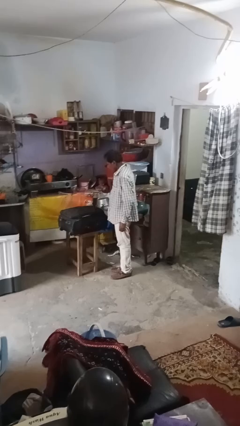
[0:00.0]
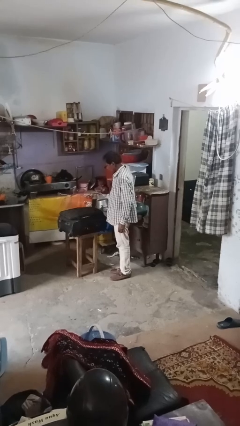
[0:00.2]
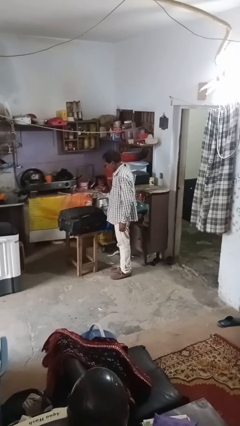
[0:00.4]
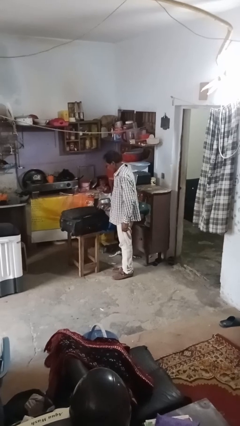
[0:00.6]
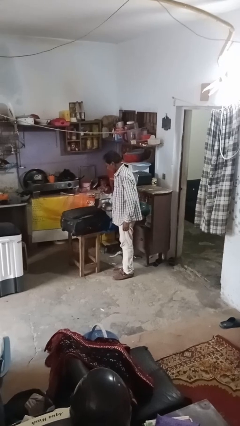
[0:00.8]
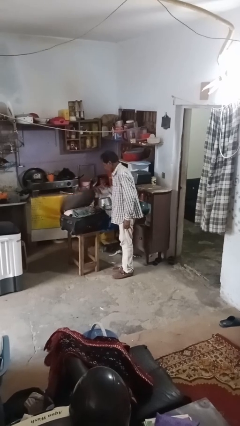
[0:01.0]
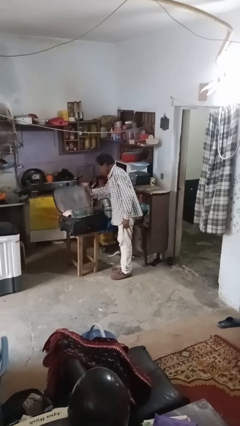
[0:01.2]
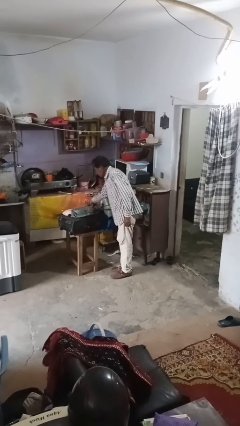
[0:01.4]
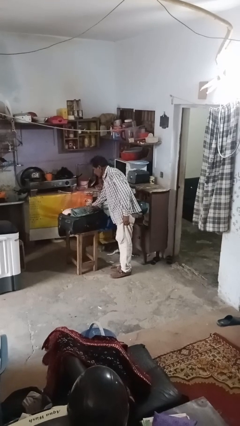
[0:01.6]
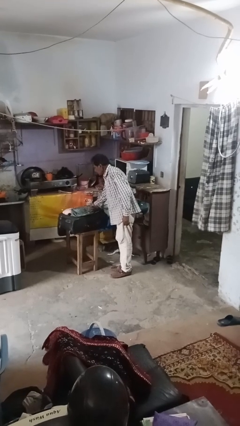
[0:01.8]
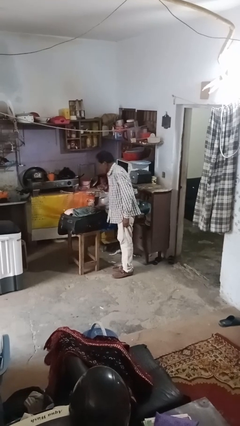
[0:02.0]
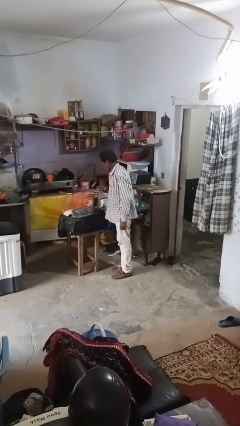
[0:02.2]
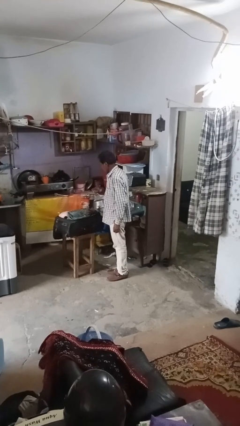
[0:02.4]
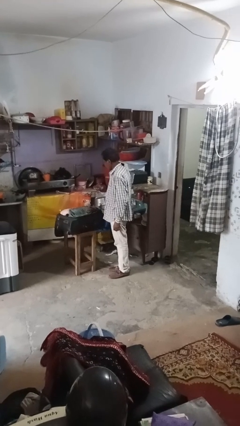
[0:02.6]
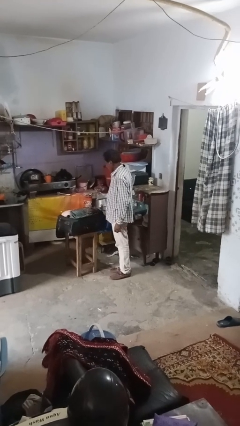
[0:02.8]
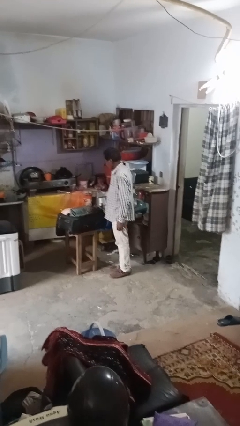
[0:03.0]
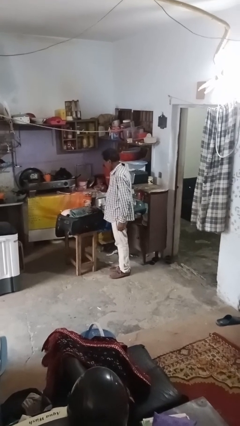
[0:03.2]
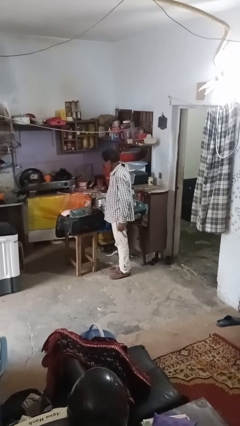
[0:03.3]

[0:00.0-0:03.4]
person opens suitcase

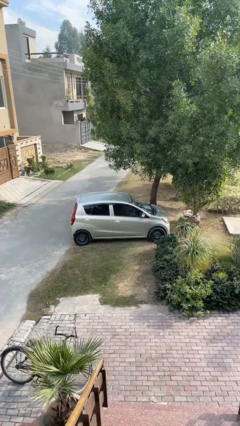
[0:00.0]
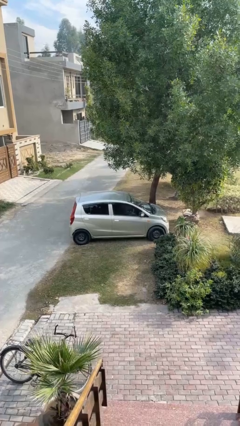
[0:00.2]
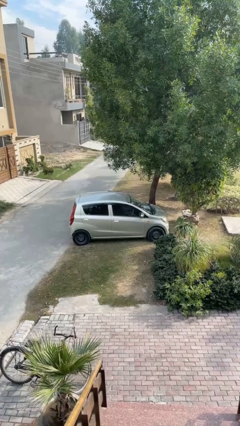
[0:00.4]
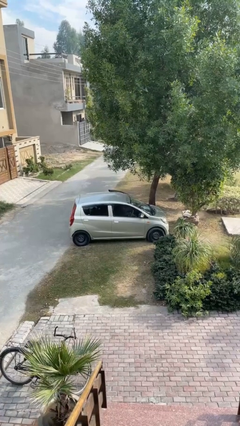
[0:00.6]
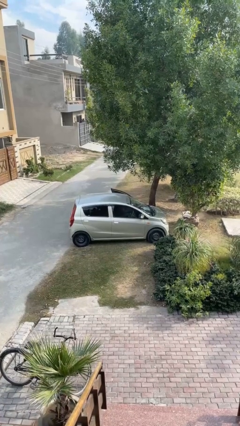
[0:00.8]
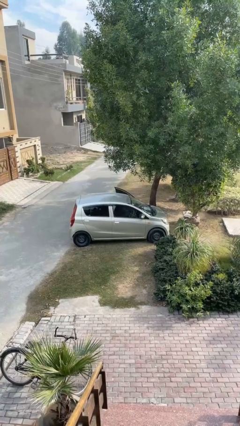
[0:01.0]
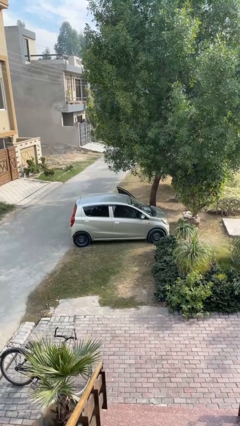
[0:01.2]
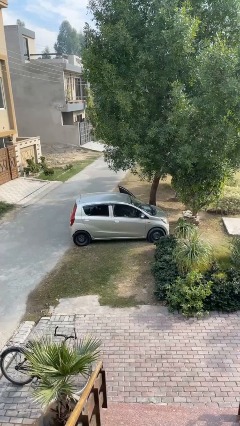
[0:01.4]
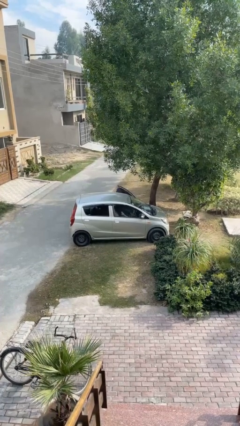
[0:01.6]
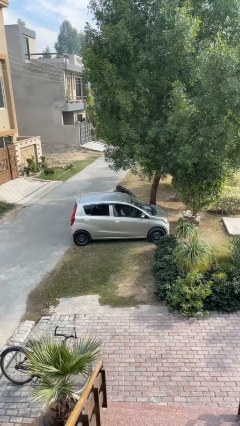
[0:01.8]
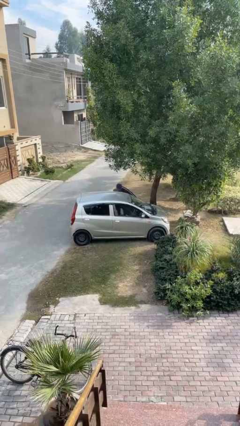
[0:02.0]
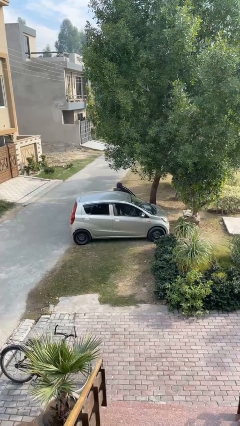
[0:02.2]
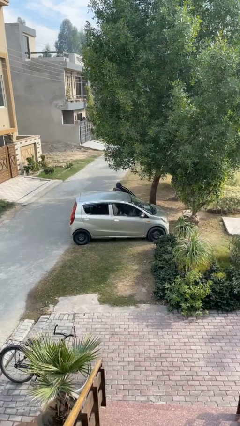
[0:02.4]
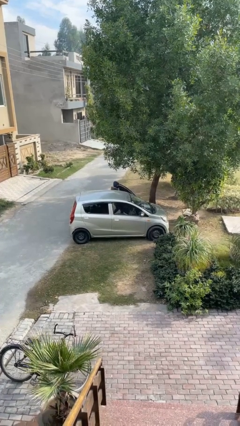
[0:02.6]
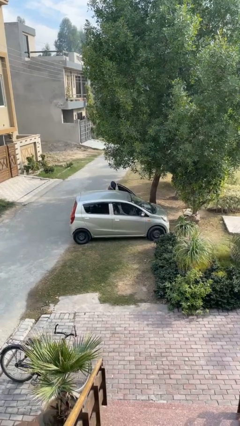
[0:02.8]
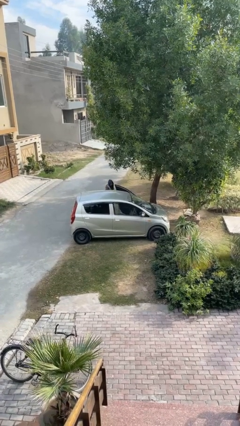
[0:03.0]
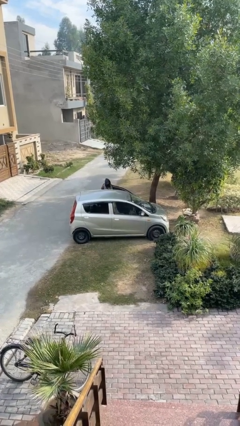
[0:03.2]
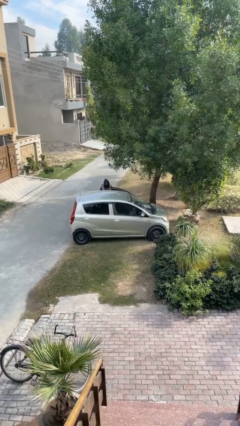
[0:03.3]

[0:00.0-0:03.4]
car drops off person

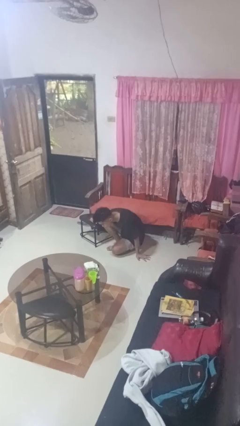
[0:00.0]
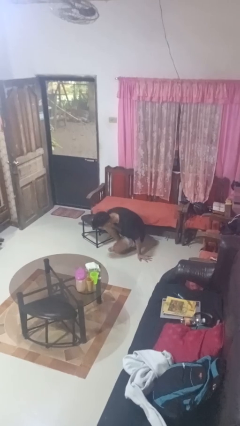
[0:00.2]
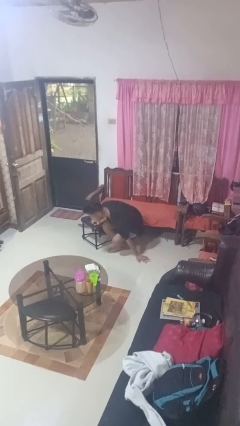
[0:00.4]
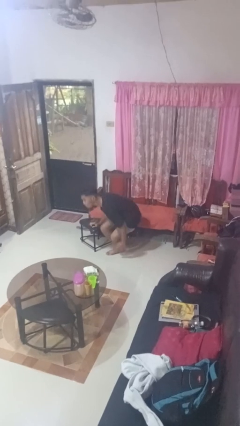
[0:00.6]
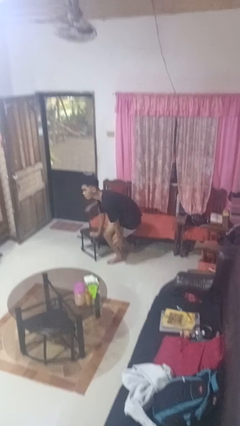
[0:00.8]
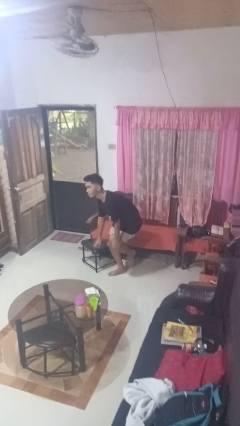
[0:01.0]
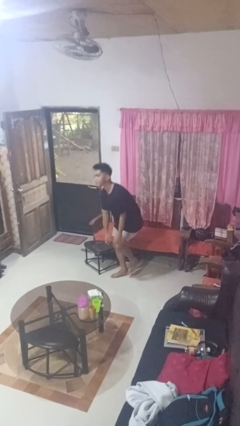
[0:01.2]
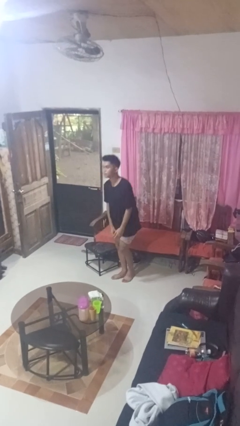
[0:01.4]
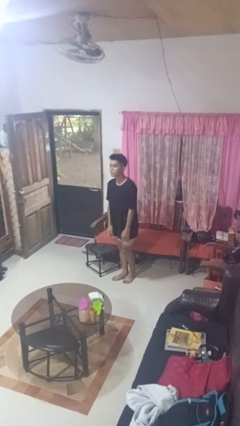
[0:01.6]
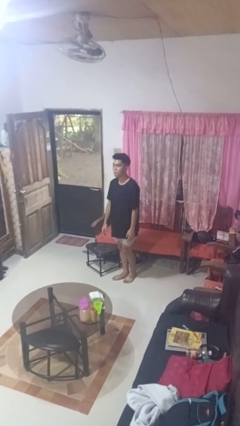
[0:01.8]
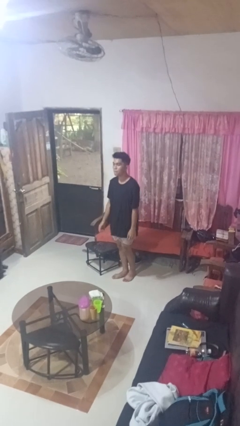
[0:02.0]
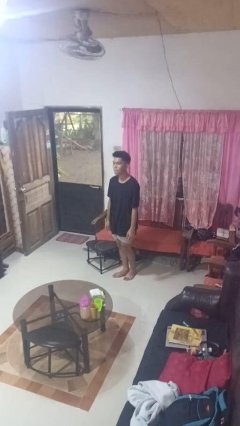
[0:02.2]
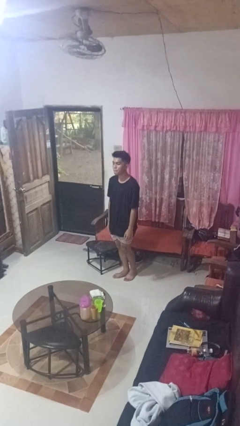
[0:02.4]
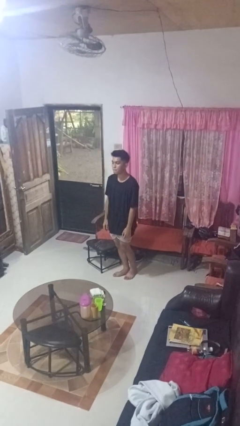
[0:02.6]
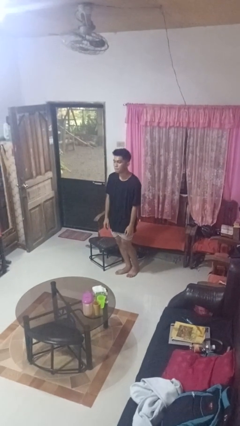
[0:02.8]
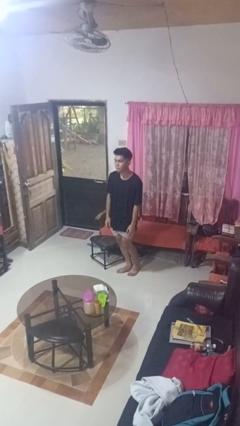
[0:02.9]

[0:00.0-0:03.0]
person stands up from floor

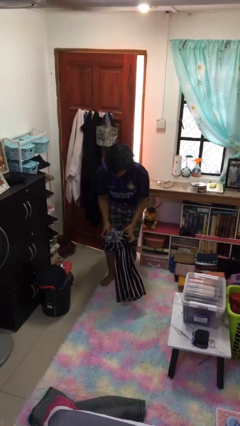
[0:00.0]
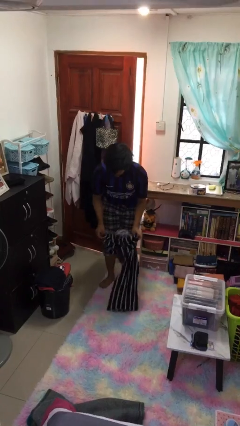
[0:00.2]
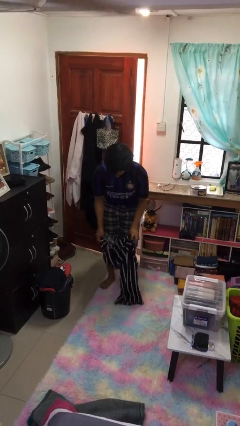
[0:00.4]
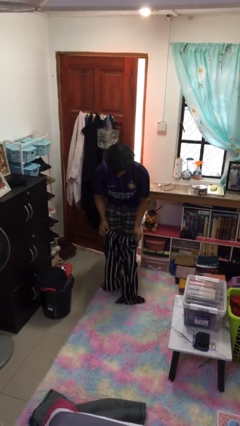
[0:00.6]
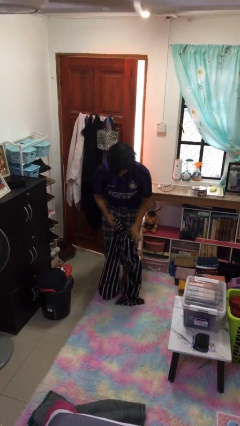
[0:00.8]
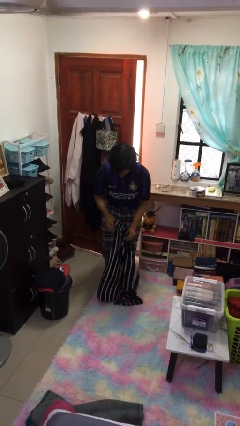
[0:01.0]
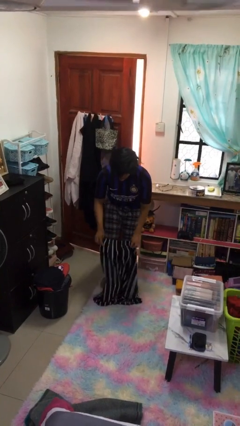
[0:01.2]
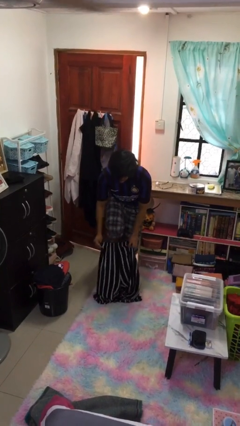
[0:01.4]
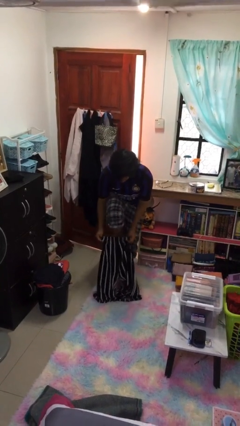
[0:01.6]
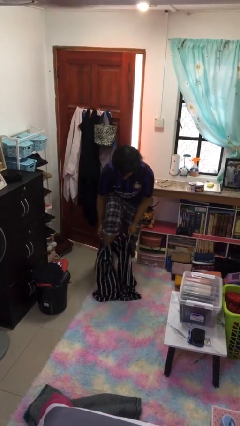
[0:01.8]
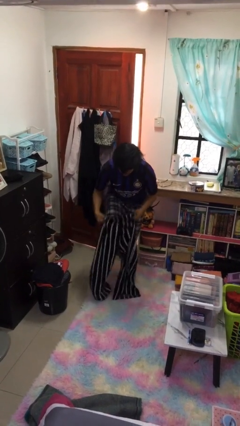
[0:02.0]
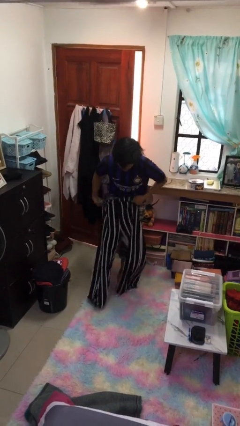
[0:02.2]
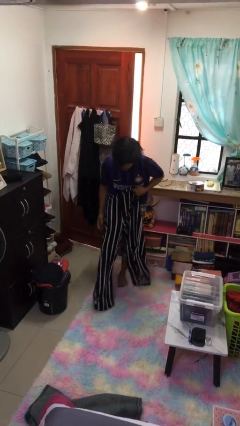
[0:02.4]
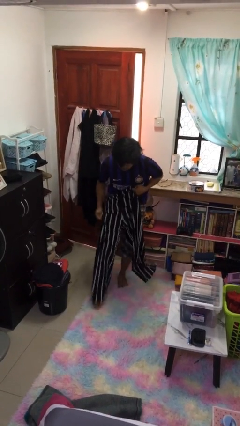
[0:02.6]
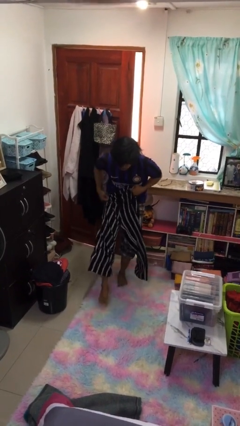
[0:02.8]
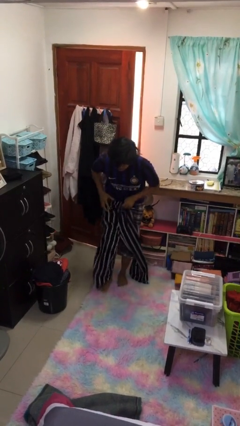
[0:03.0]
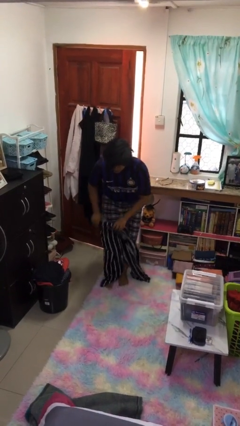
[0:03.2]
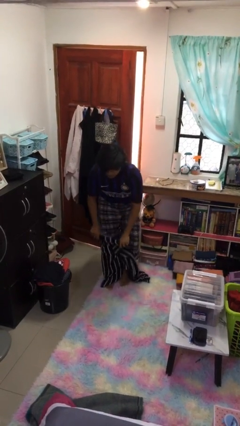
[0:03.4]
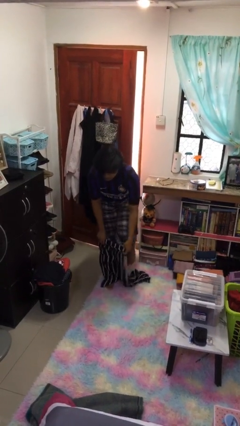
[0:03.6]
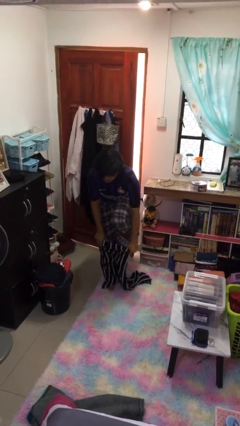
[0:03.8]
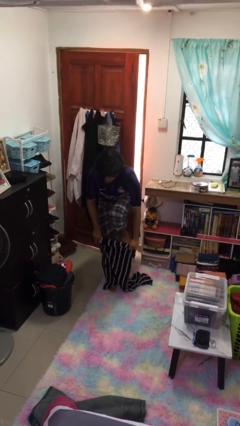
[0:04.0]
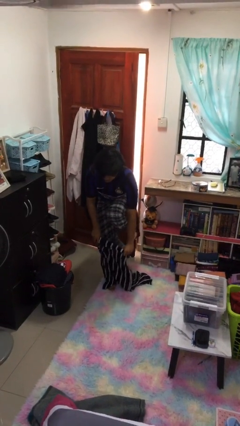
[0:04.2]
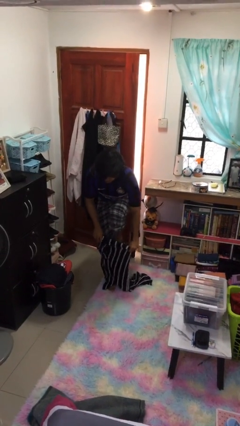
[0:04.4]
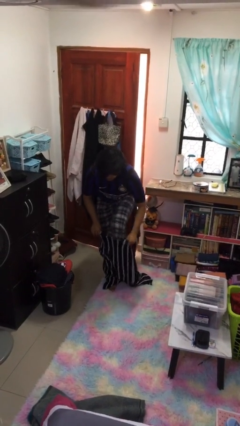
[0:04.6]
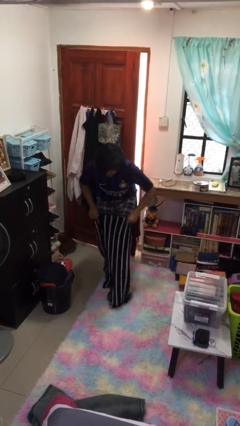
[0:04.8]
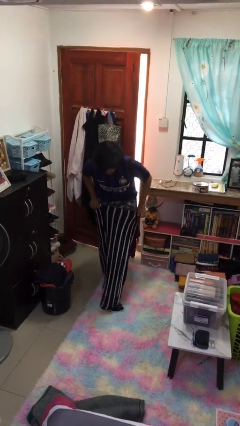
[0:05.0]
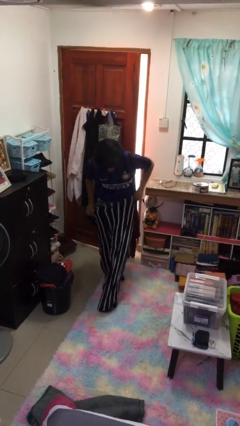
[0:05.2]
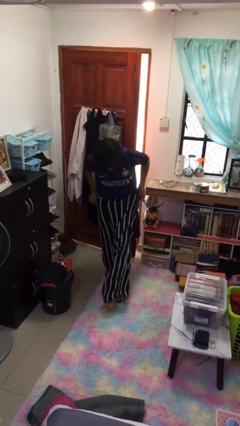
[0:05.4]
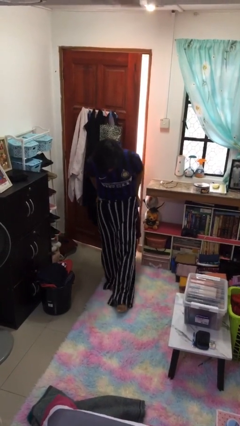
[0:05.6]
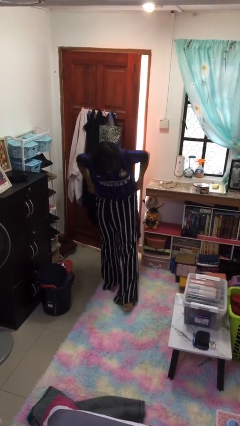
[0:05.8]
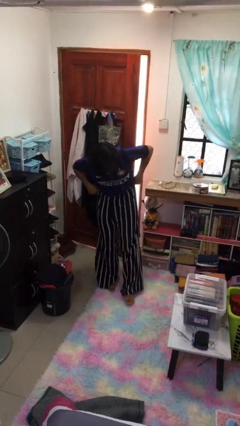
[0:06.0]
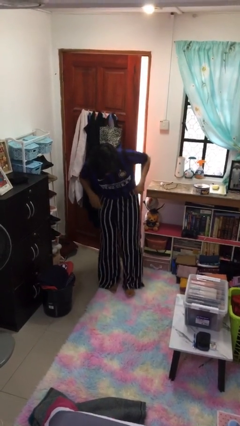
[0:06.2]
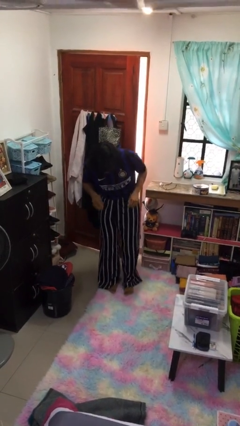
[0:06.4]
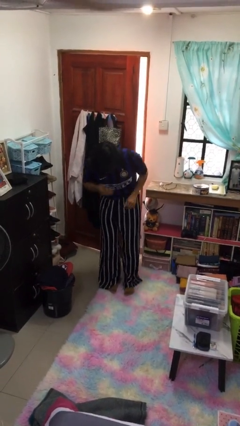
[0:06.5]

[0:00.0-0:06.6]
person puts on pants

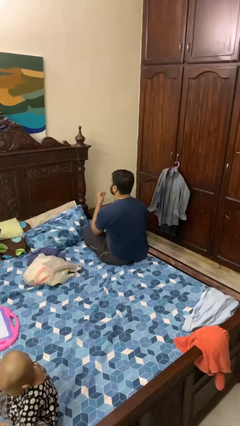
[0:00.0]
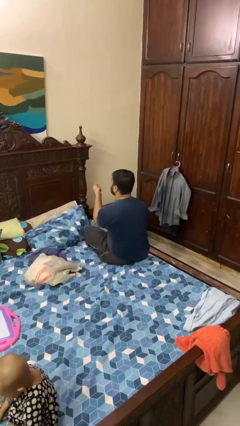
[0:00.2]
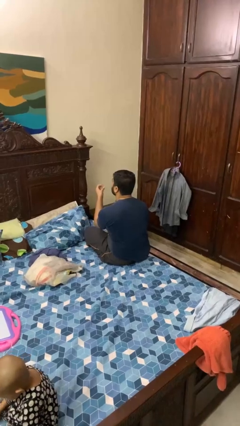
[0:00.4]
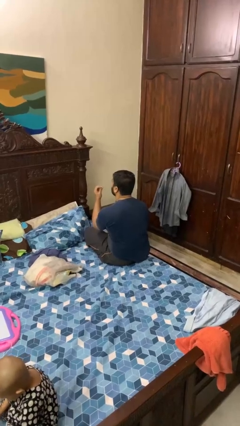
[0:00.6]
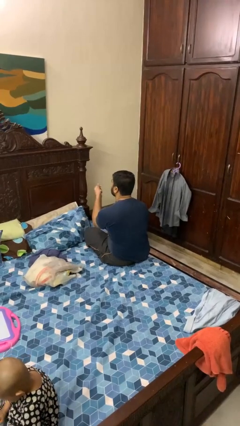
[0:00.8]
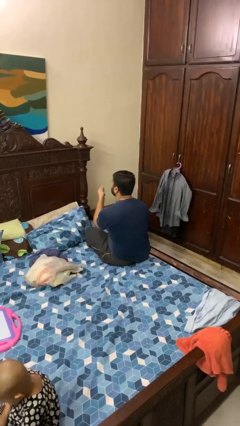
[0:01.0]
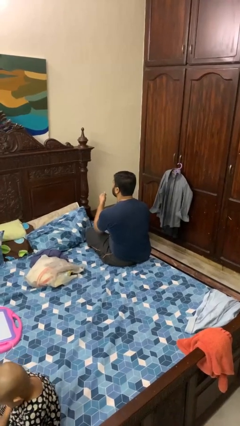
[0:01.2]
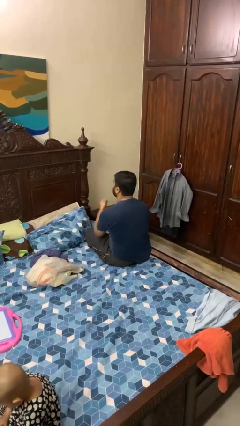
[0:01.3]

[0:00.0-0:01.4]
person snaps fingers
